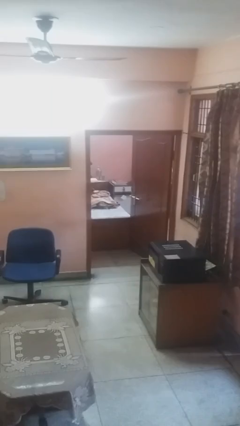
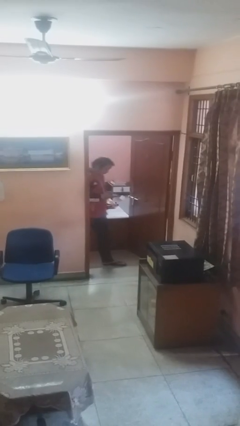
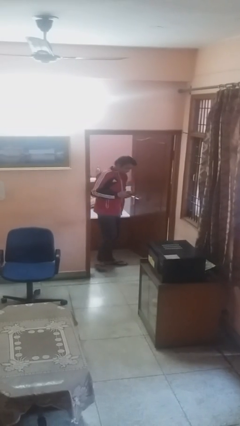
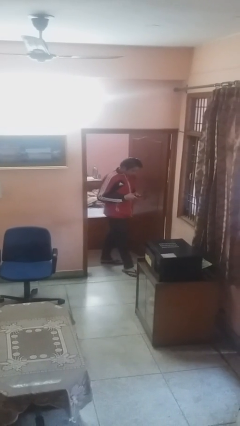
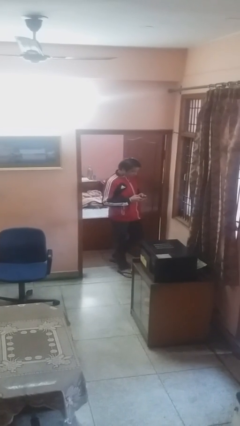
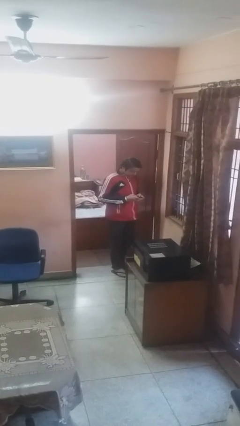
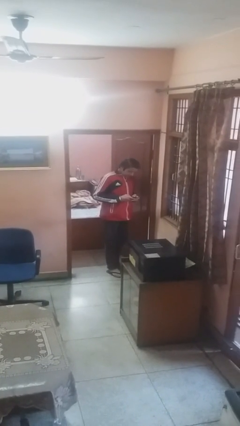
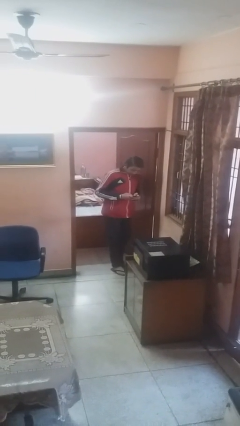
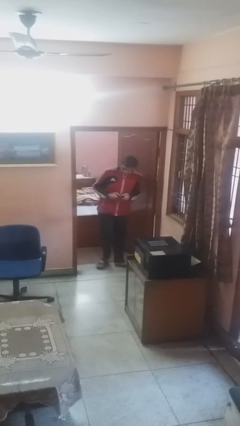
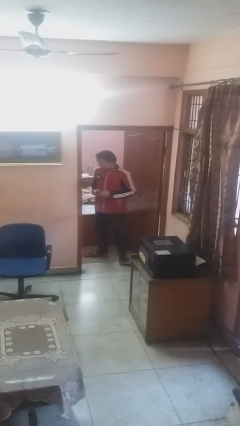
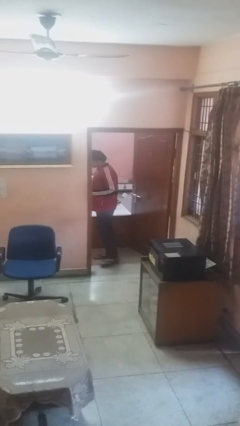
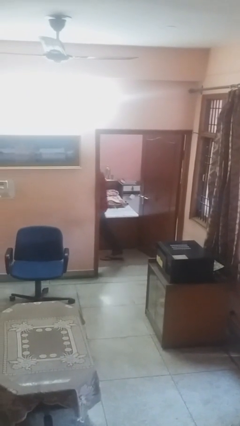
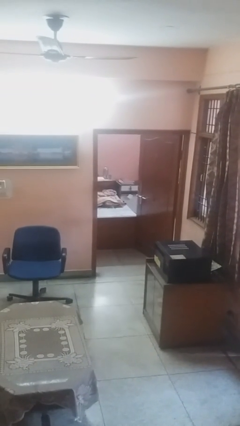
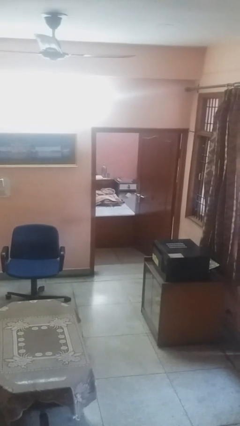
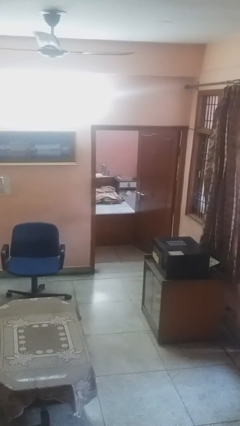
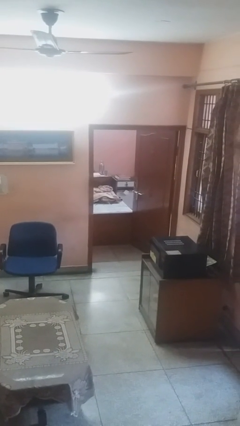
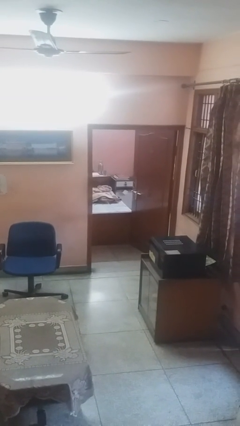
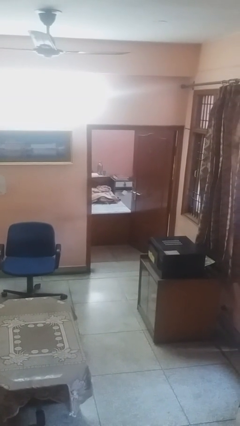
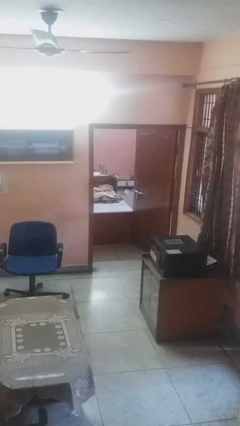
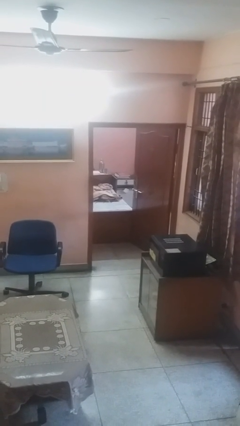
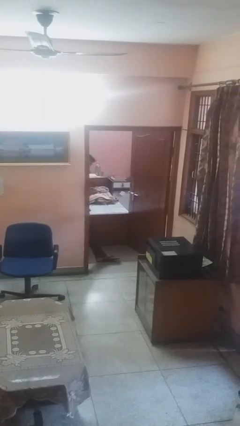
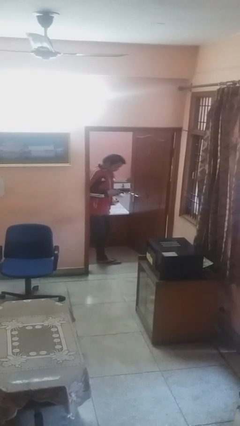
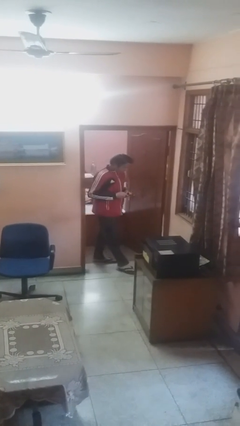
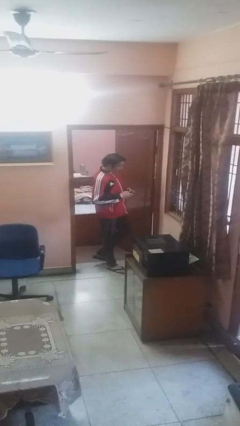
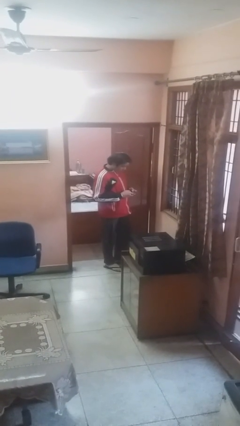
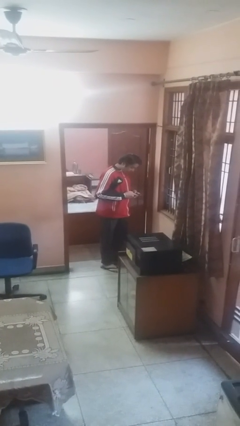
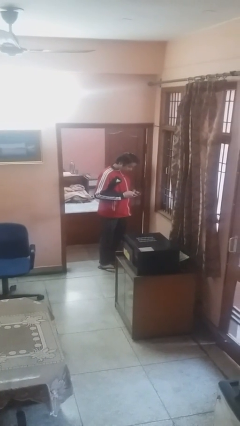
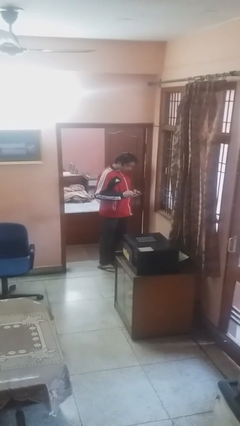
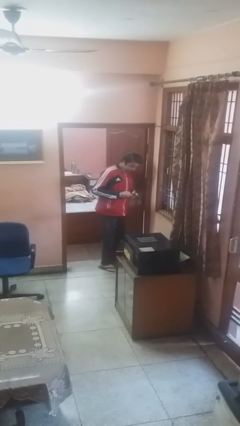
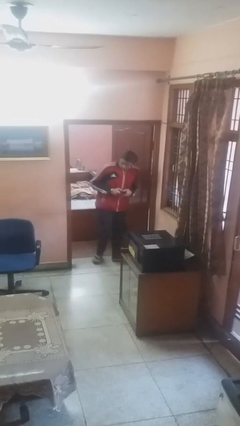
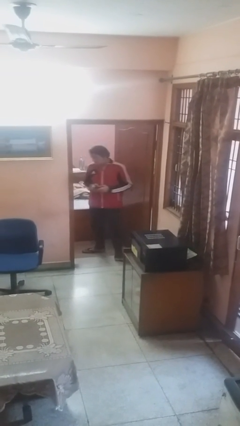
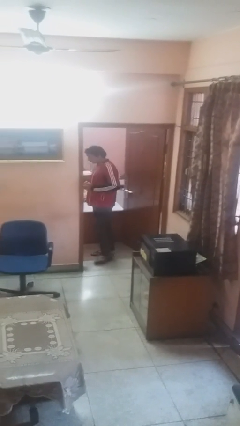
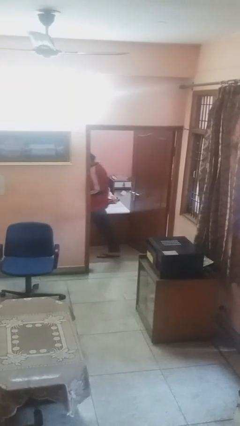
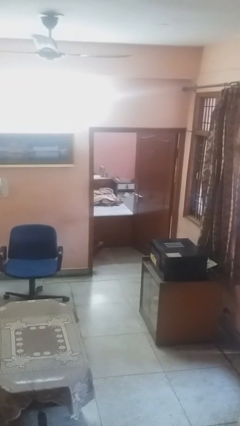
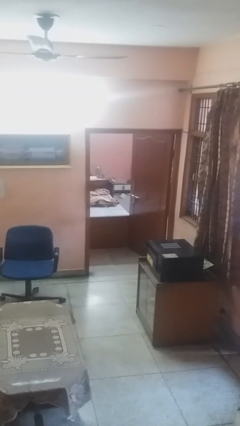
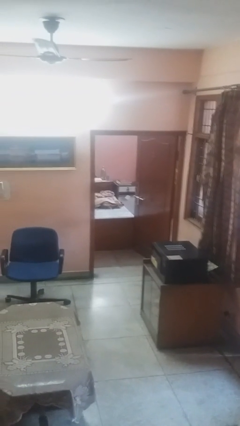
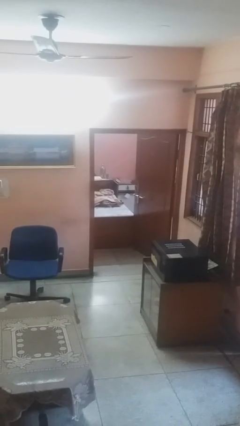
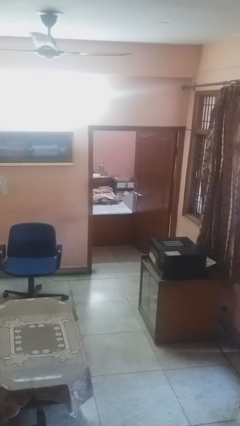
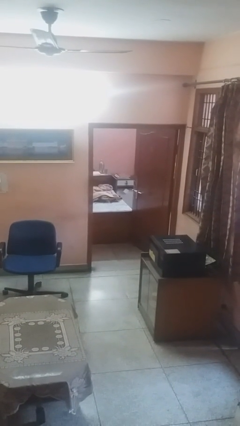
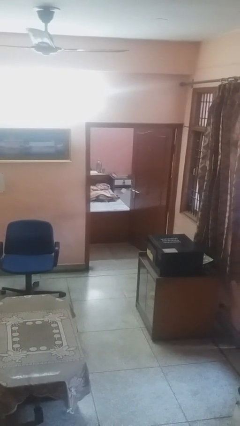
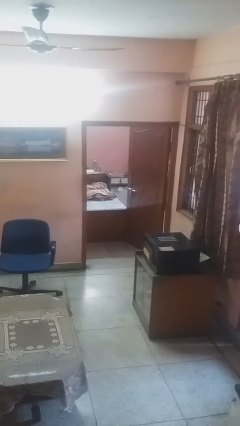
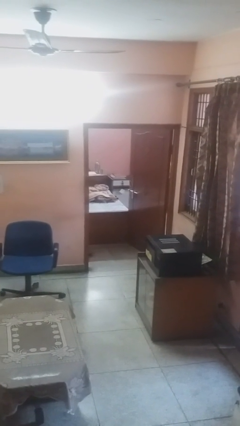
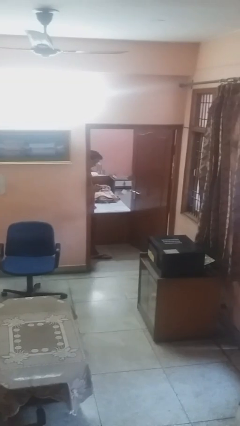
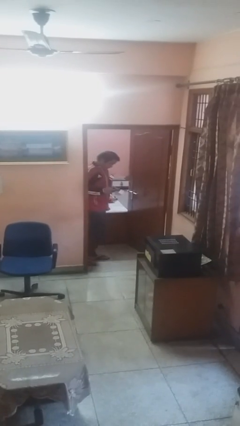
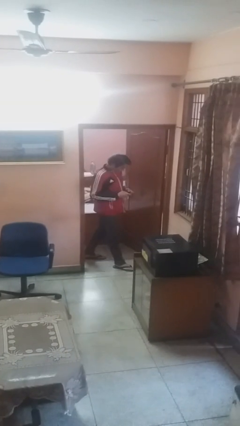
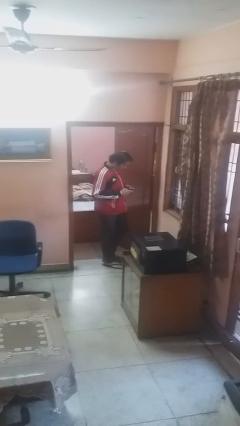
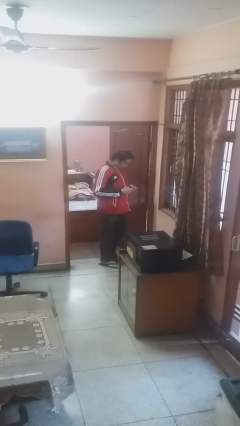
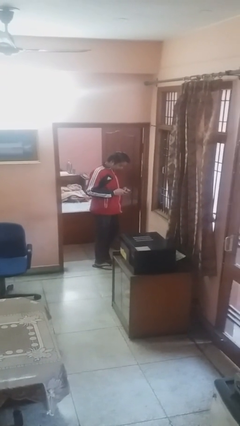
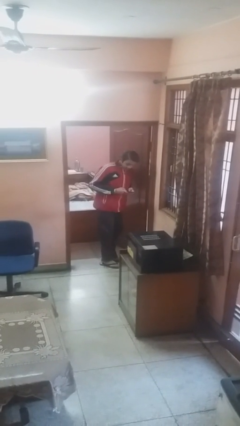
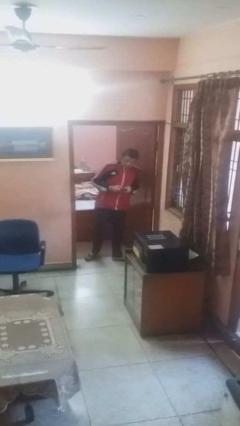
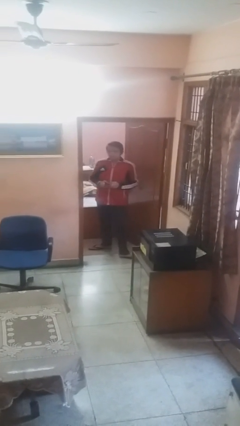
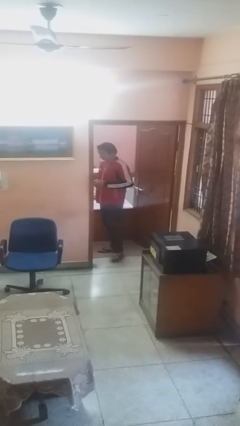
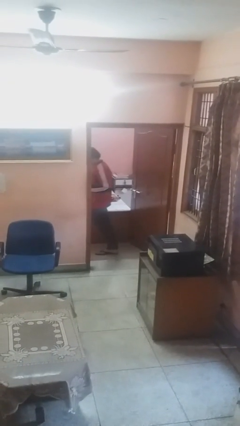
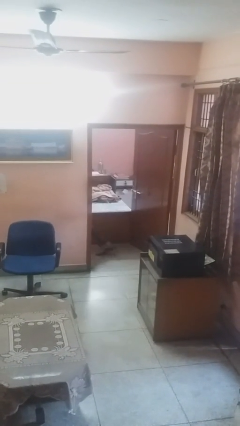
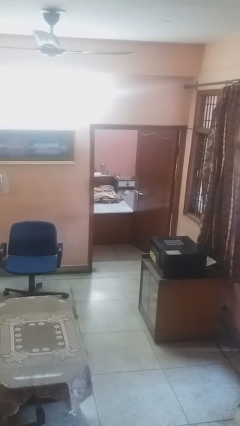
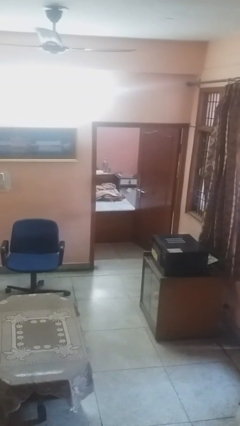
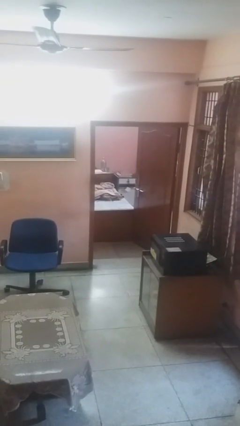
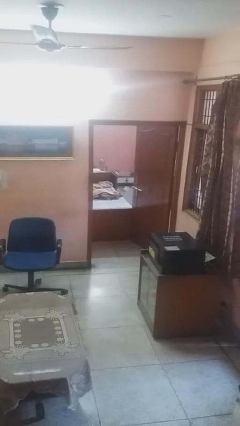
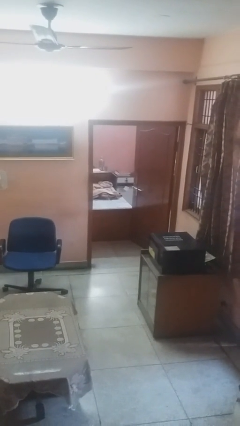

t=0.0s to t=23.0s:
person texts on phone

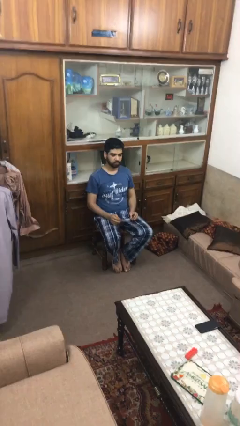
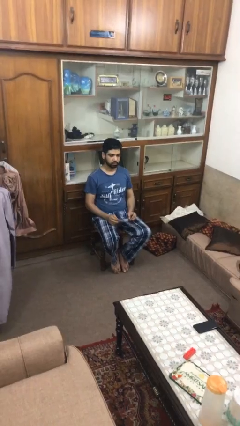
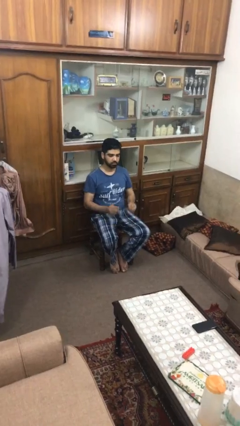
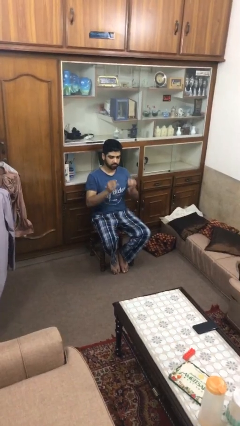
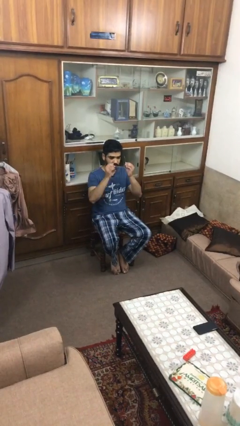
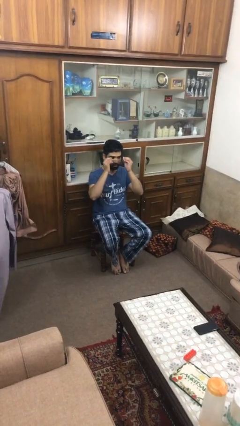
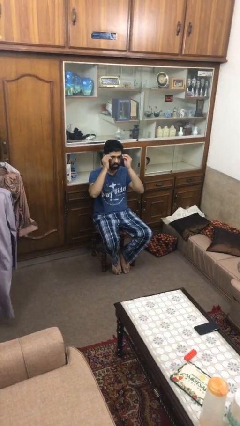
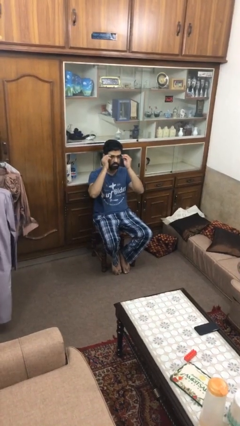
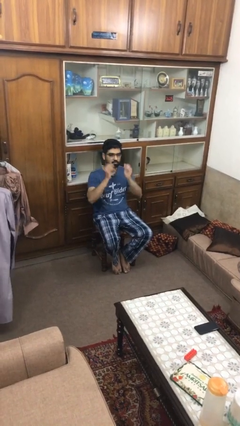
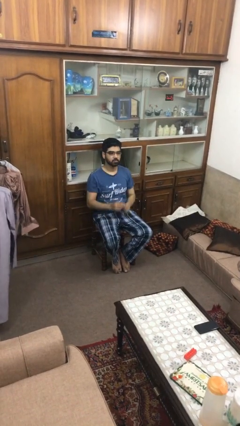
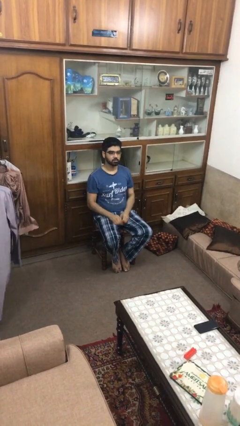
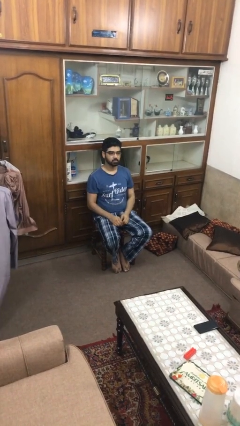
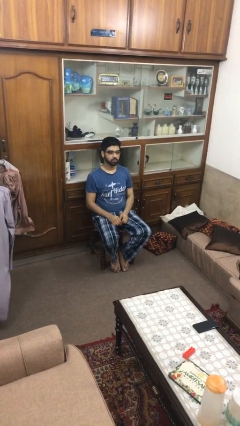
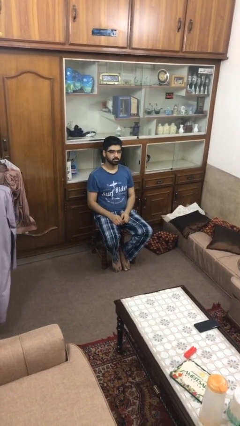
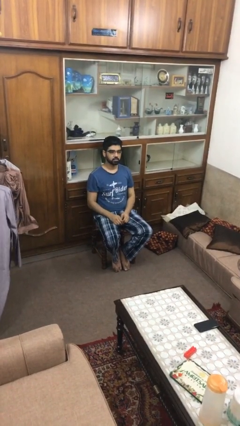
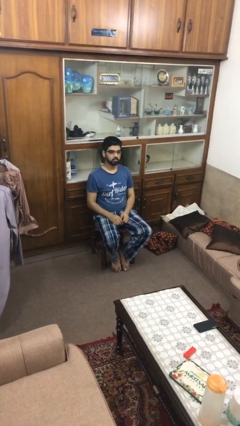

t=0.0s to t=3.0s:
person puts on glasses

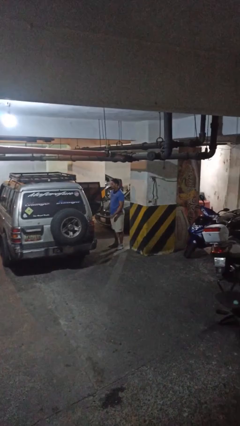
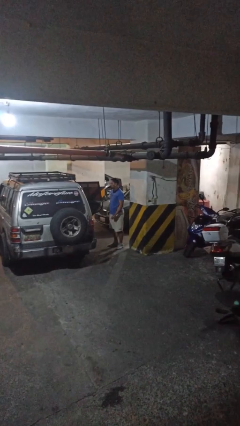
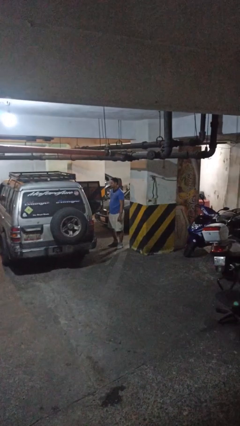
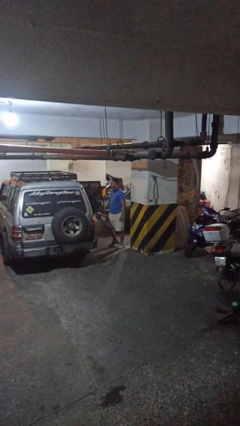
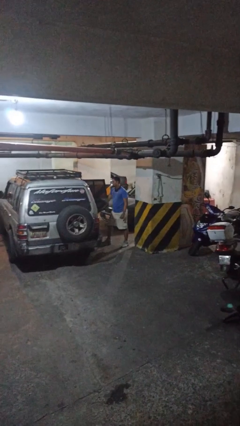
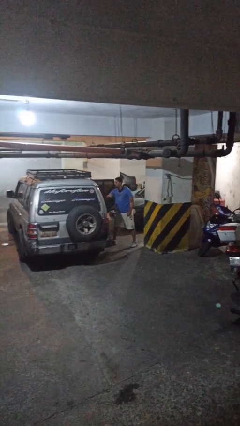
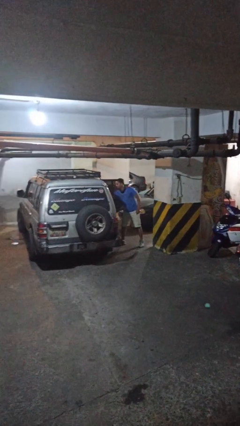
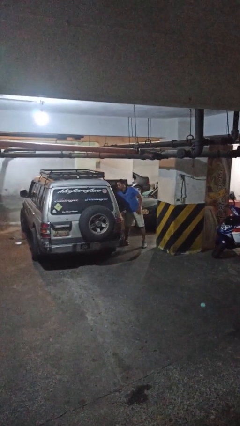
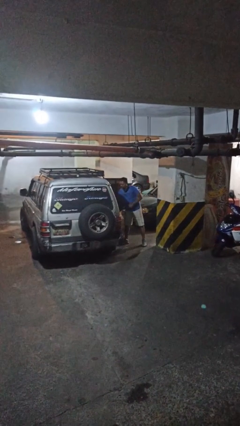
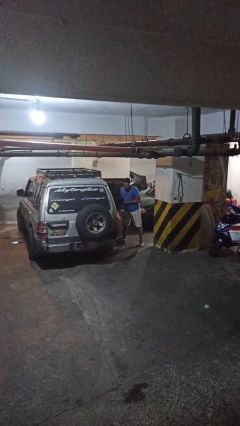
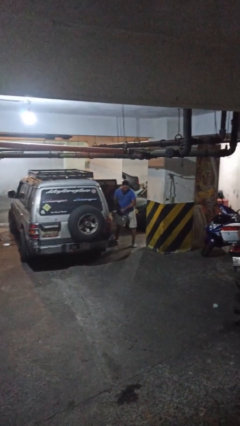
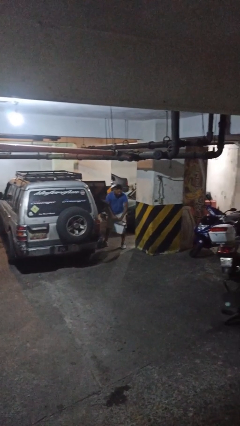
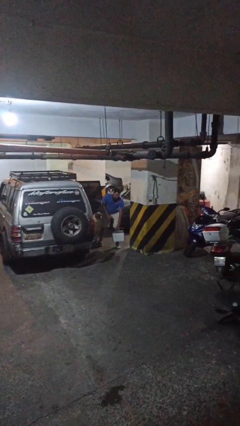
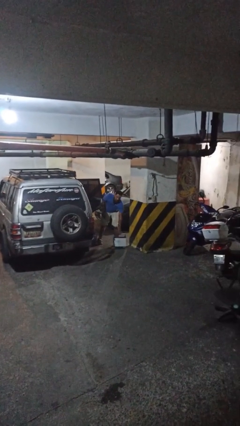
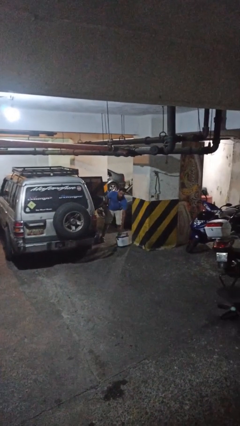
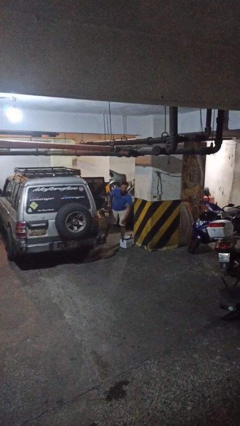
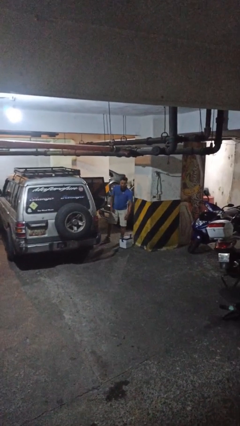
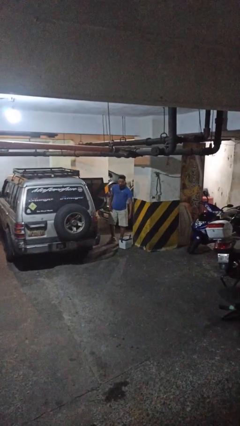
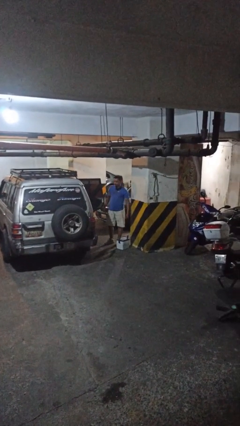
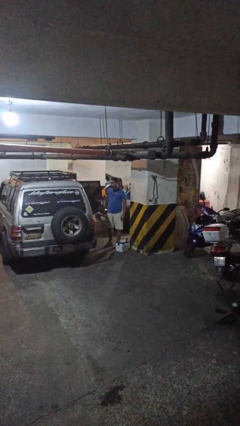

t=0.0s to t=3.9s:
person unloads car
